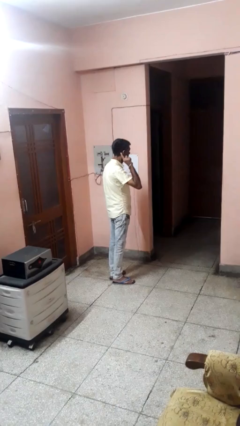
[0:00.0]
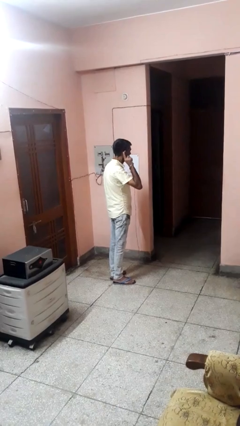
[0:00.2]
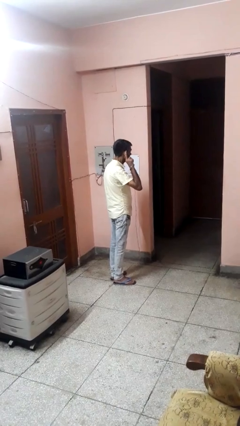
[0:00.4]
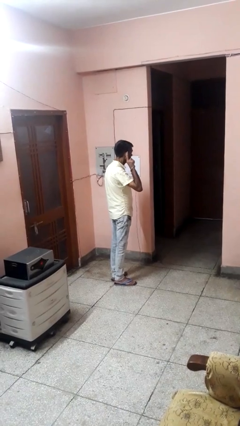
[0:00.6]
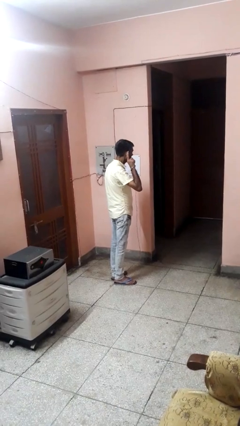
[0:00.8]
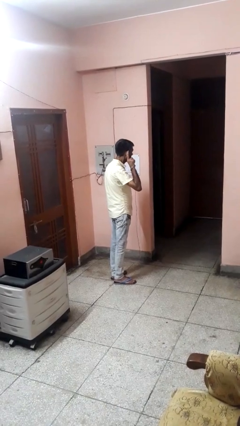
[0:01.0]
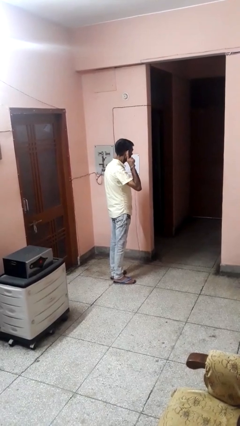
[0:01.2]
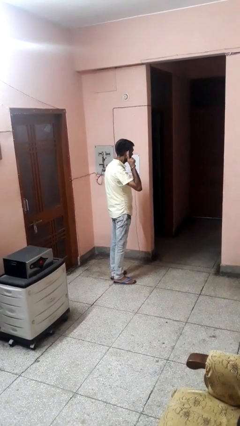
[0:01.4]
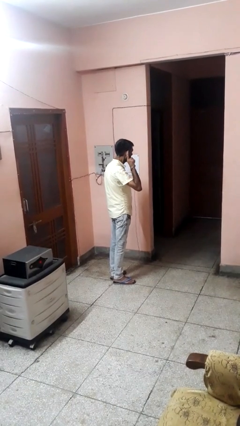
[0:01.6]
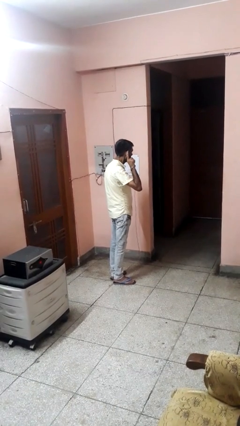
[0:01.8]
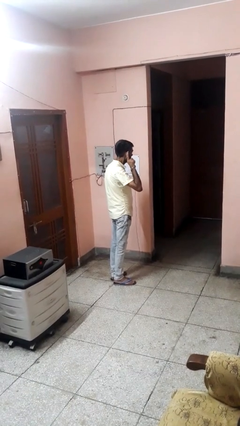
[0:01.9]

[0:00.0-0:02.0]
person gestures listen closely

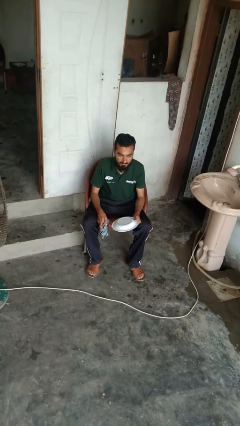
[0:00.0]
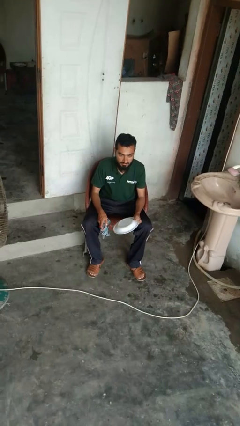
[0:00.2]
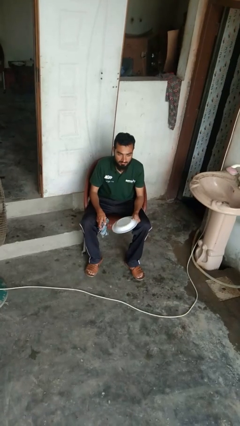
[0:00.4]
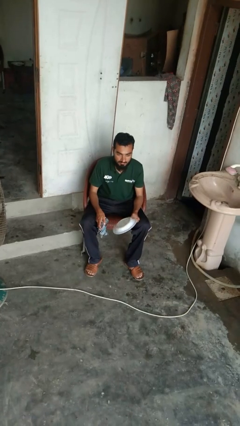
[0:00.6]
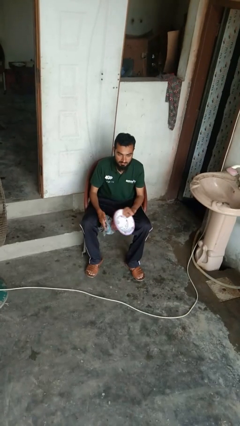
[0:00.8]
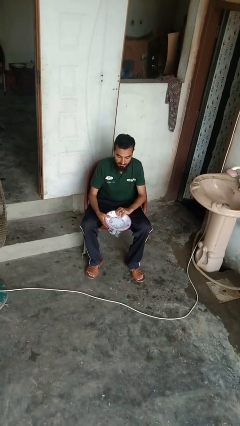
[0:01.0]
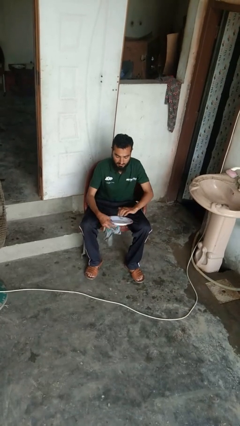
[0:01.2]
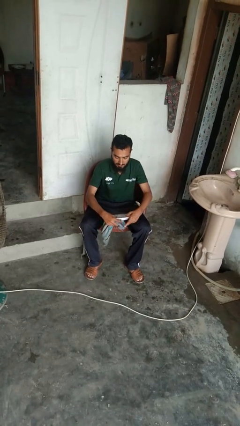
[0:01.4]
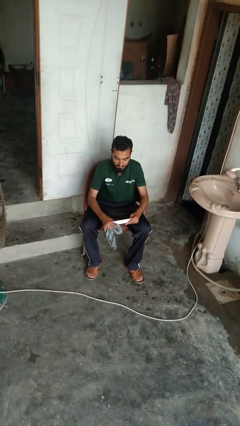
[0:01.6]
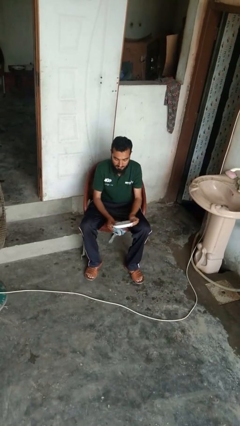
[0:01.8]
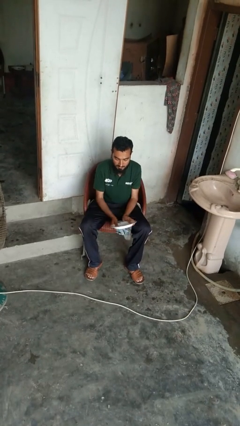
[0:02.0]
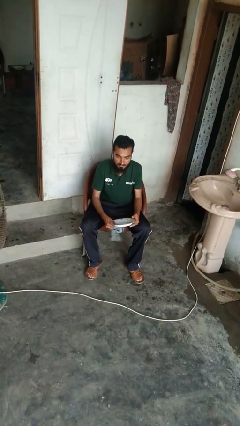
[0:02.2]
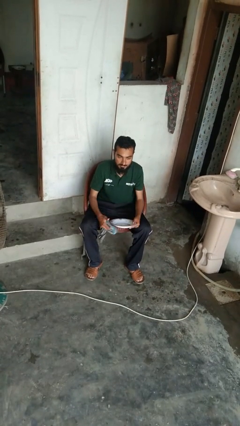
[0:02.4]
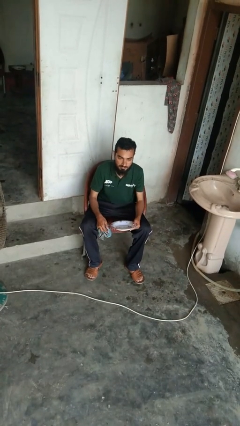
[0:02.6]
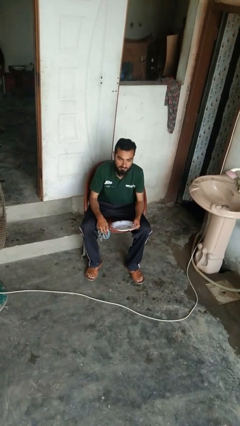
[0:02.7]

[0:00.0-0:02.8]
person dries dish

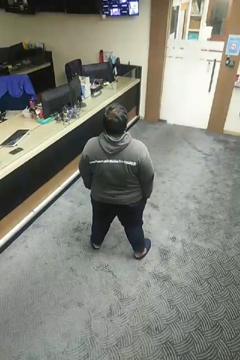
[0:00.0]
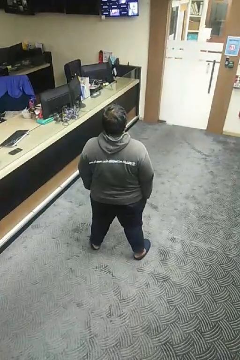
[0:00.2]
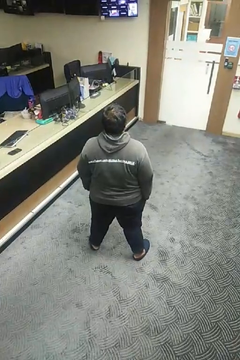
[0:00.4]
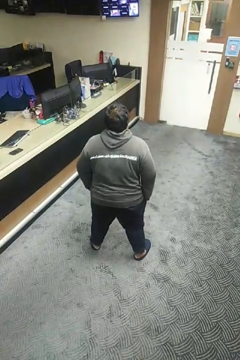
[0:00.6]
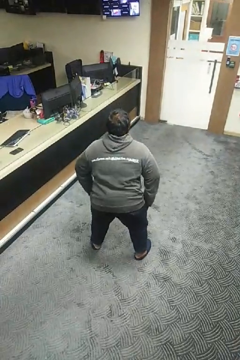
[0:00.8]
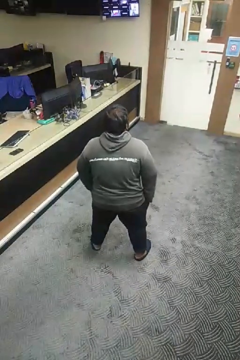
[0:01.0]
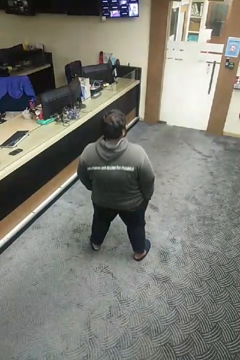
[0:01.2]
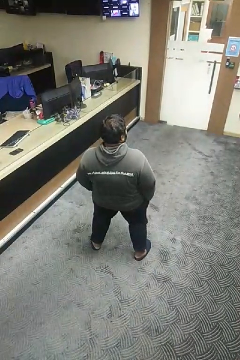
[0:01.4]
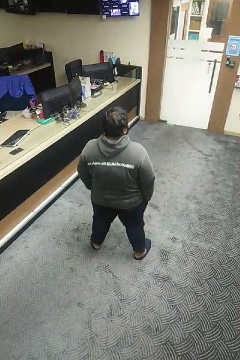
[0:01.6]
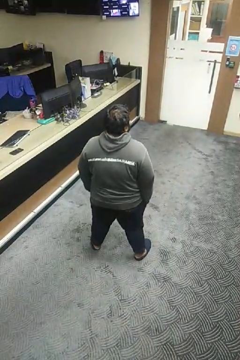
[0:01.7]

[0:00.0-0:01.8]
person wiggles hips

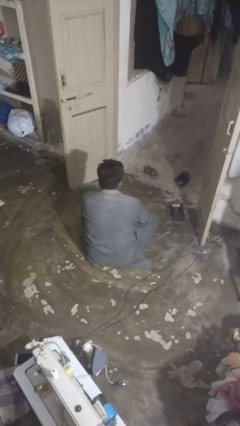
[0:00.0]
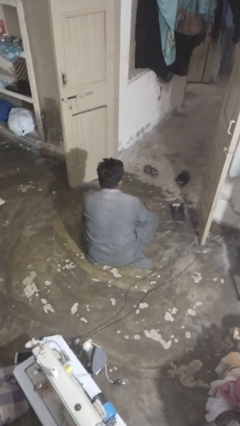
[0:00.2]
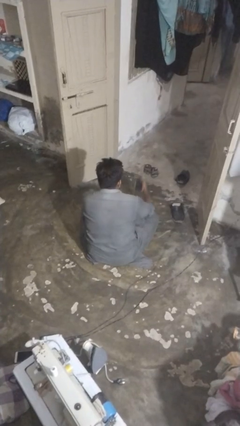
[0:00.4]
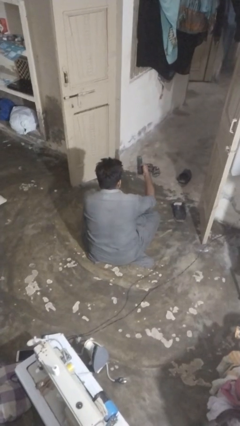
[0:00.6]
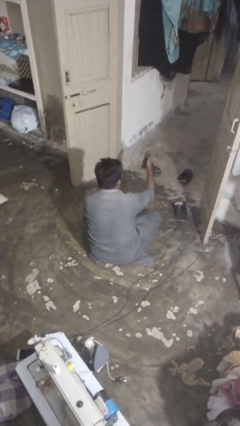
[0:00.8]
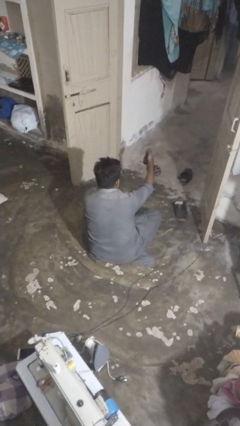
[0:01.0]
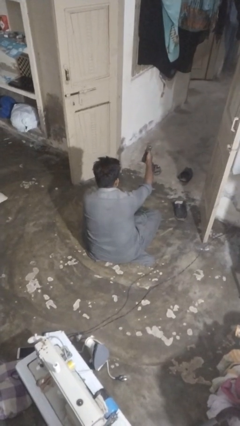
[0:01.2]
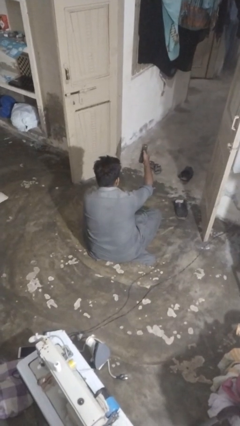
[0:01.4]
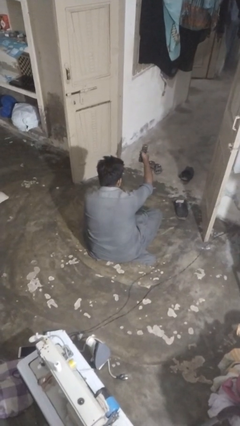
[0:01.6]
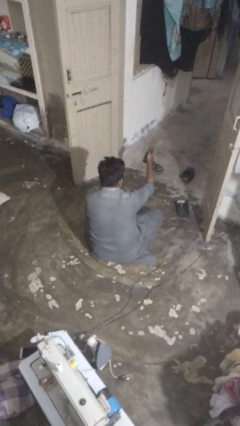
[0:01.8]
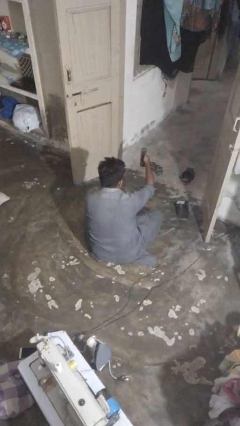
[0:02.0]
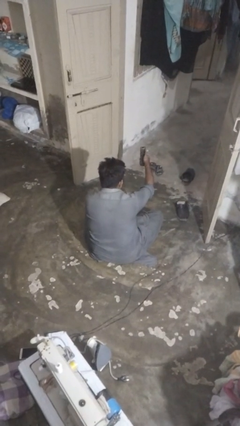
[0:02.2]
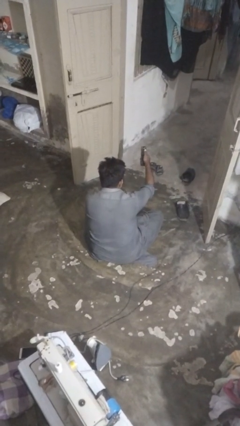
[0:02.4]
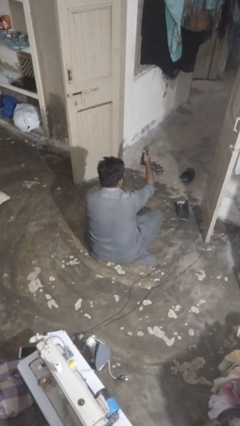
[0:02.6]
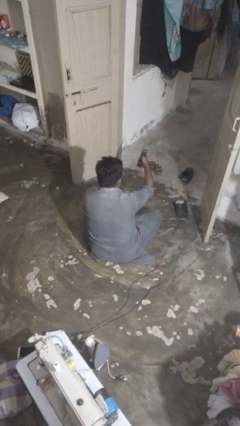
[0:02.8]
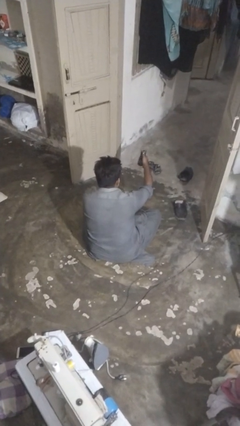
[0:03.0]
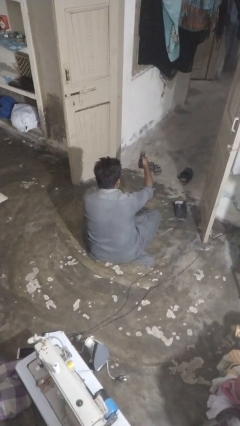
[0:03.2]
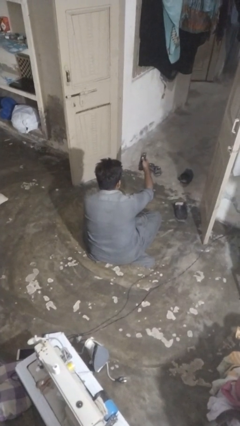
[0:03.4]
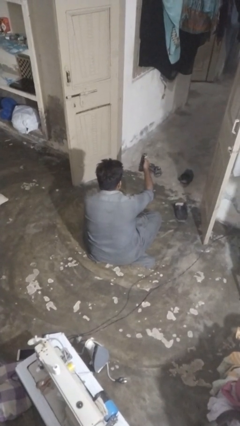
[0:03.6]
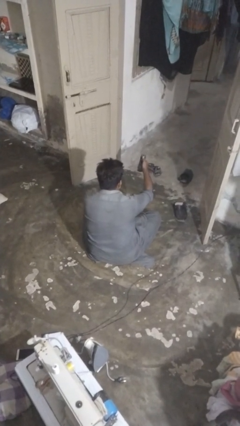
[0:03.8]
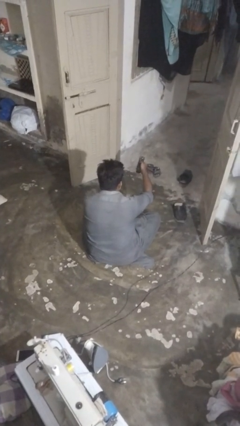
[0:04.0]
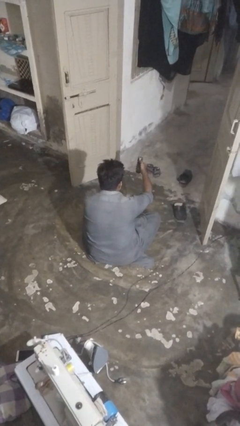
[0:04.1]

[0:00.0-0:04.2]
person uses television remote

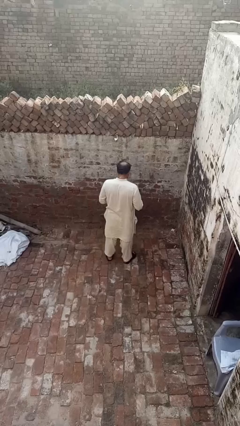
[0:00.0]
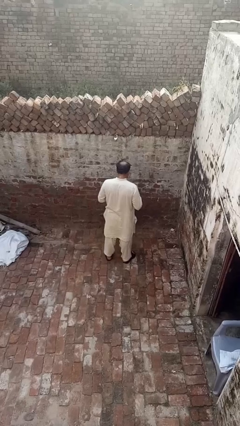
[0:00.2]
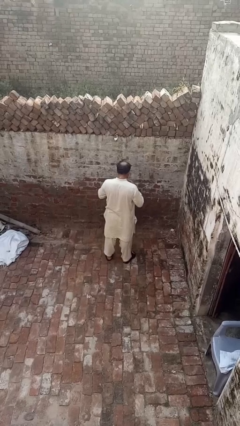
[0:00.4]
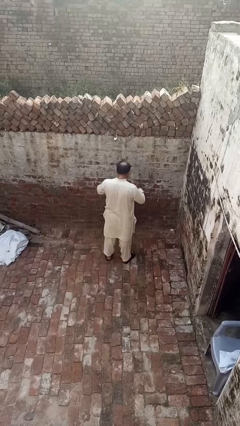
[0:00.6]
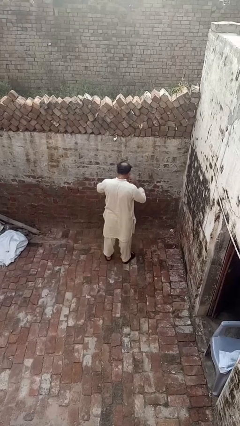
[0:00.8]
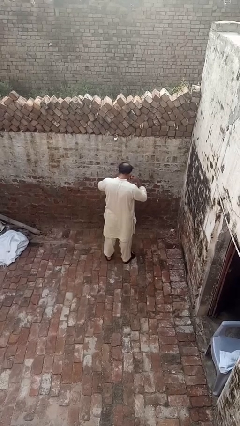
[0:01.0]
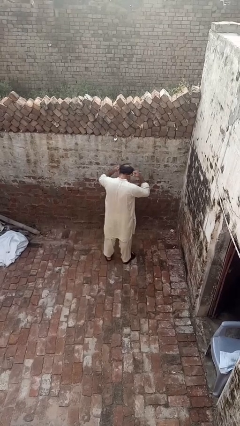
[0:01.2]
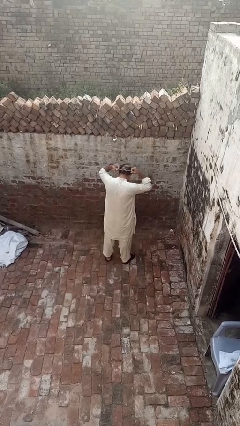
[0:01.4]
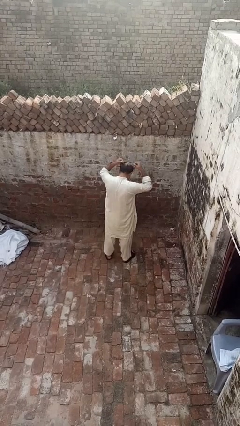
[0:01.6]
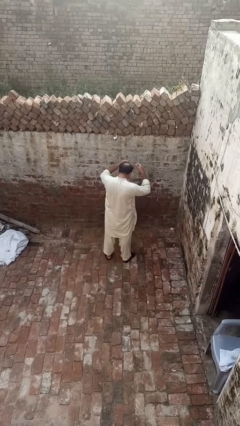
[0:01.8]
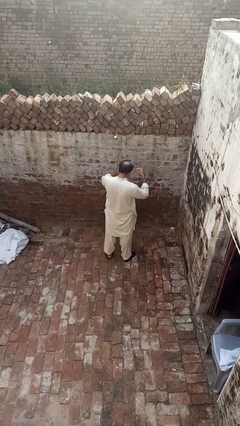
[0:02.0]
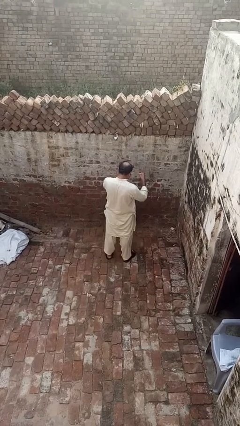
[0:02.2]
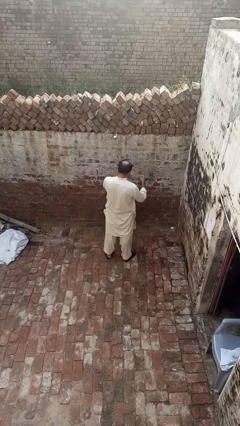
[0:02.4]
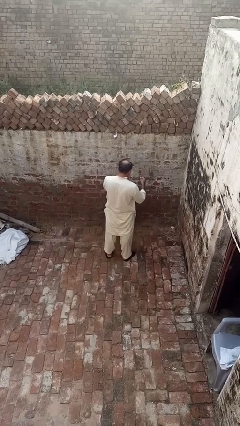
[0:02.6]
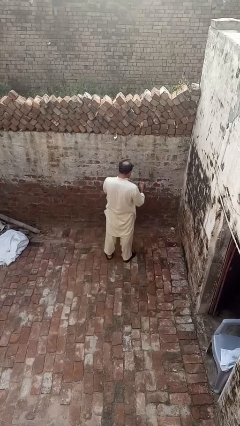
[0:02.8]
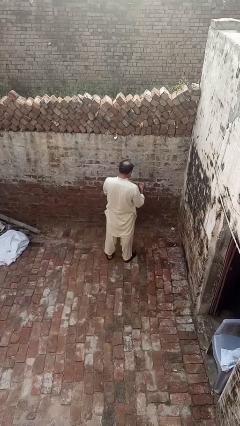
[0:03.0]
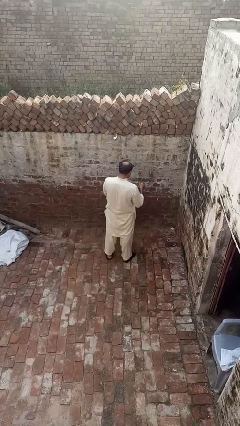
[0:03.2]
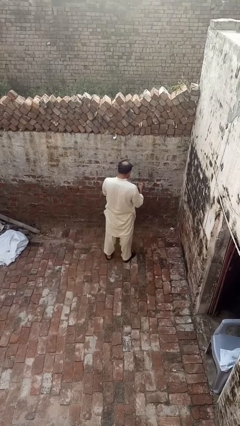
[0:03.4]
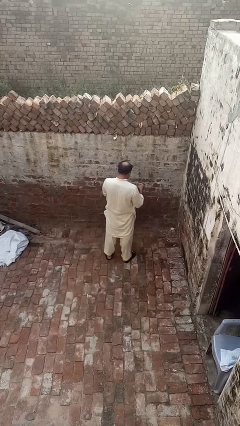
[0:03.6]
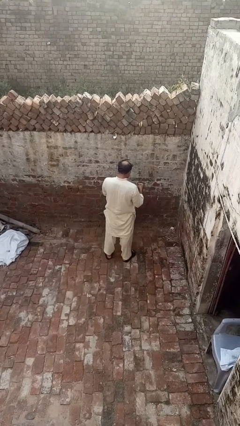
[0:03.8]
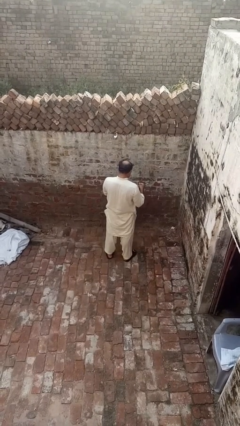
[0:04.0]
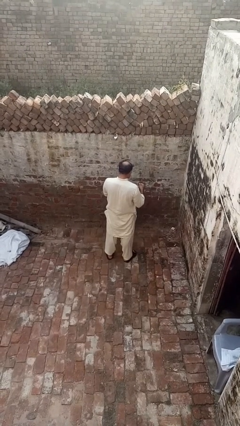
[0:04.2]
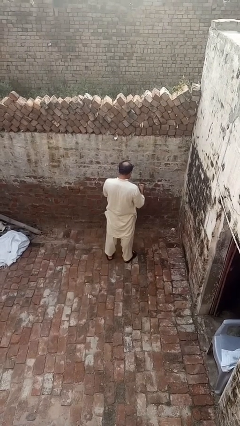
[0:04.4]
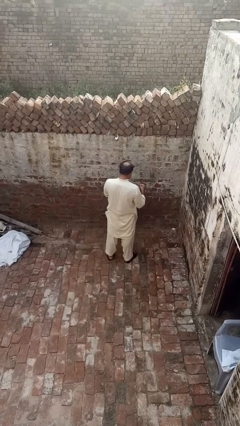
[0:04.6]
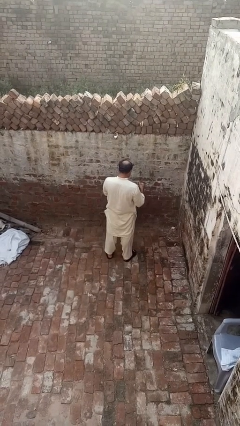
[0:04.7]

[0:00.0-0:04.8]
person takes off necklace

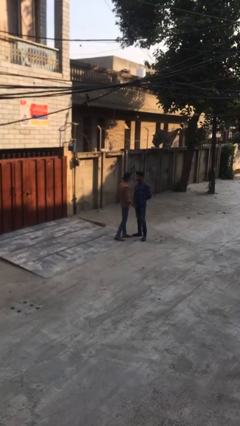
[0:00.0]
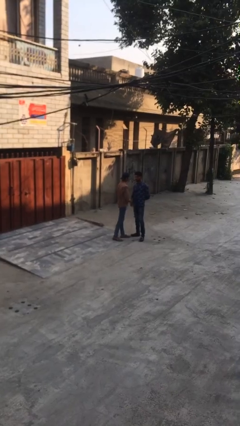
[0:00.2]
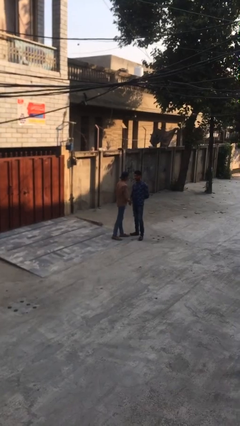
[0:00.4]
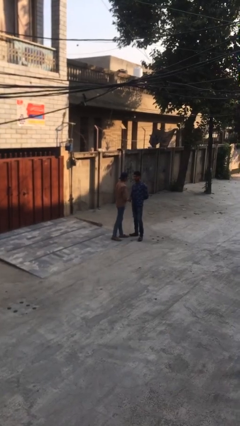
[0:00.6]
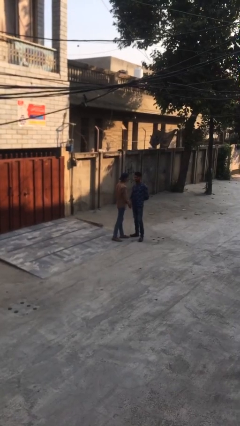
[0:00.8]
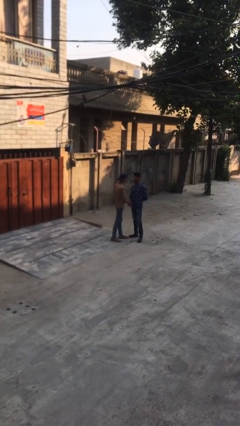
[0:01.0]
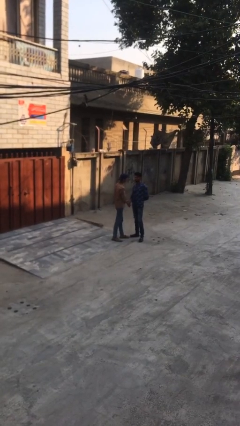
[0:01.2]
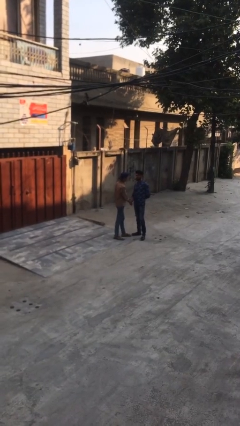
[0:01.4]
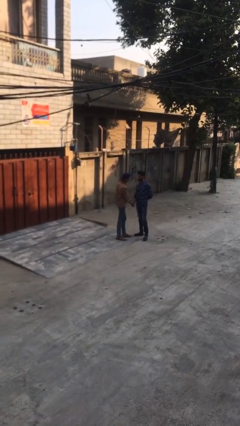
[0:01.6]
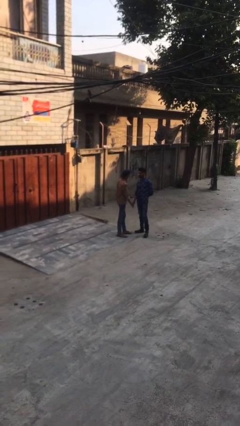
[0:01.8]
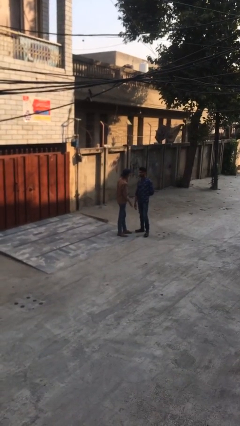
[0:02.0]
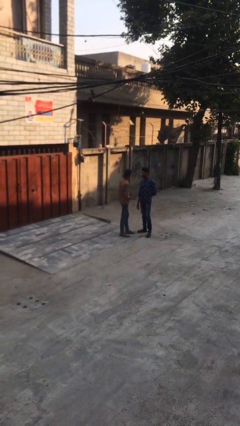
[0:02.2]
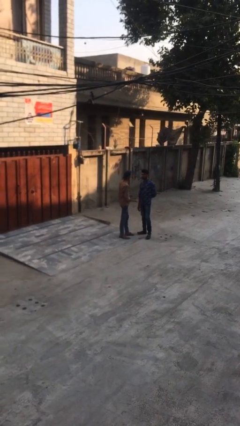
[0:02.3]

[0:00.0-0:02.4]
person shakes hand
